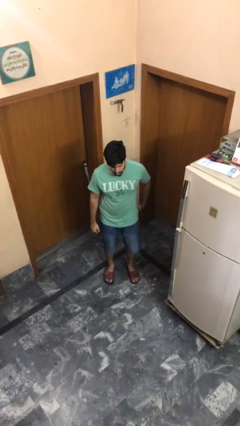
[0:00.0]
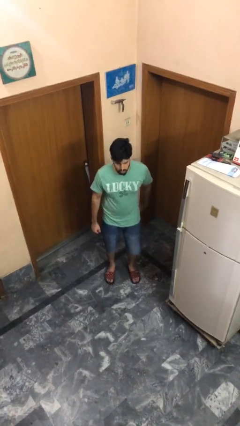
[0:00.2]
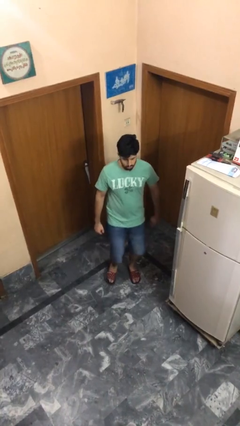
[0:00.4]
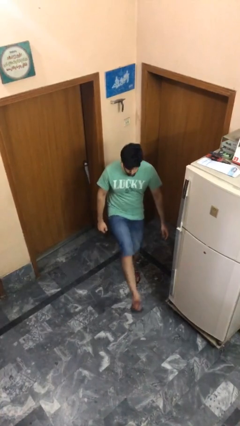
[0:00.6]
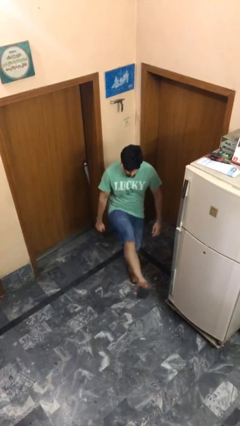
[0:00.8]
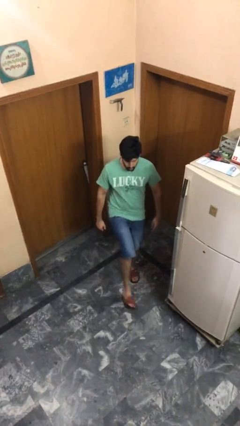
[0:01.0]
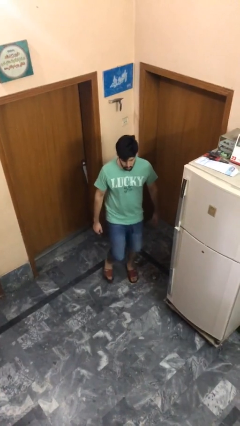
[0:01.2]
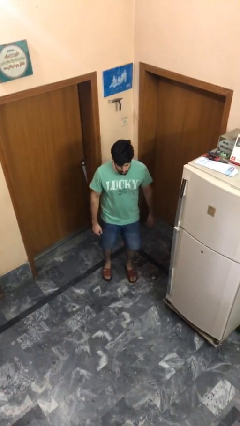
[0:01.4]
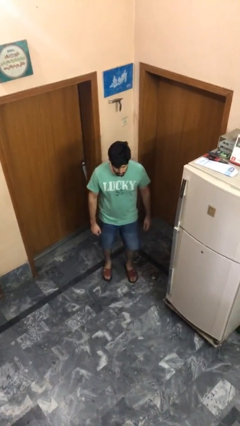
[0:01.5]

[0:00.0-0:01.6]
person karate kicks

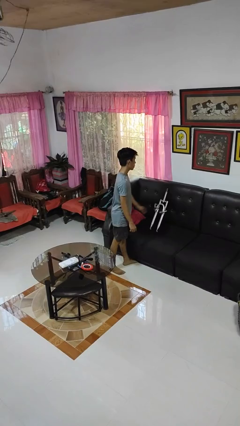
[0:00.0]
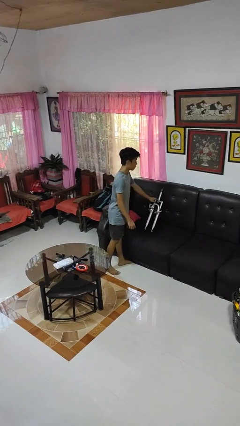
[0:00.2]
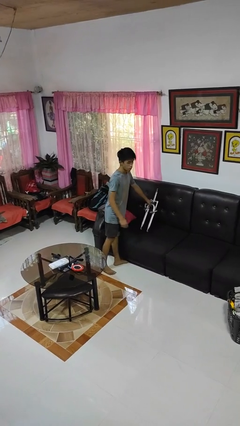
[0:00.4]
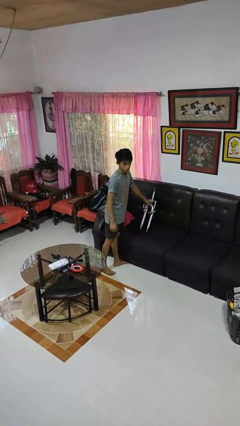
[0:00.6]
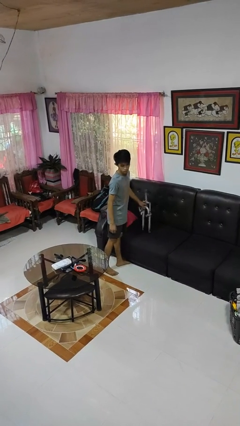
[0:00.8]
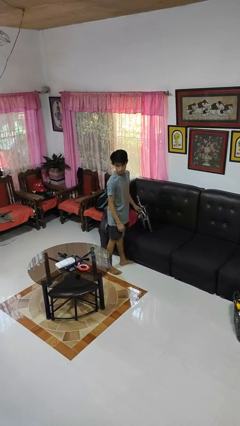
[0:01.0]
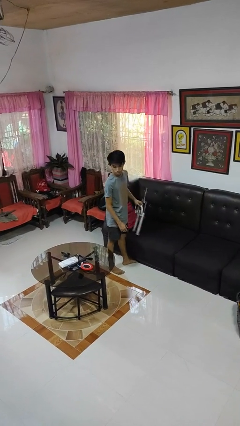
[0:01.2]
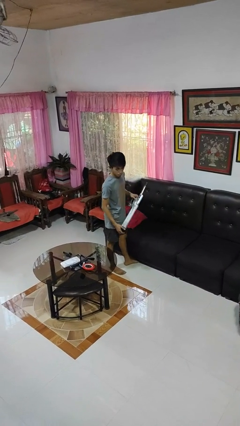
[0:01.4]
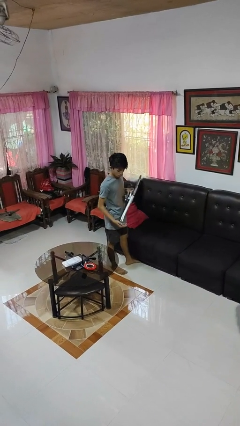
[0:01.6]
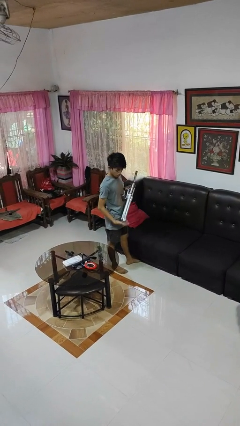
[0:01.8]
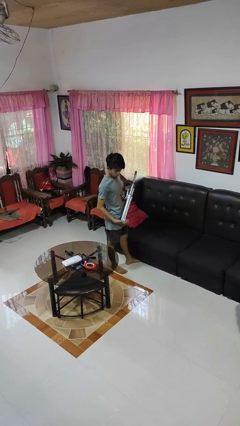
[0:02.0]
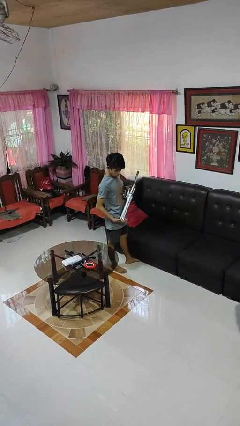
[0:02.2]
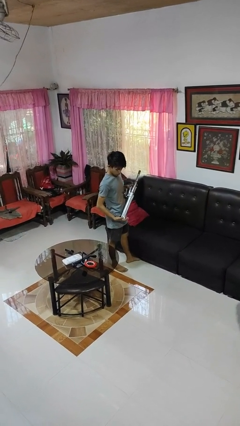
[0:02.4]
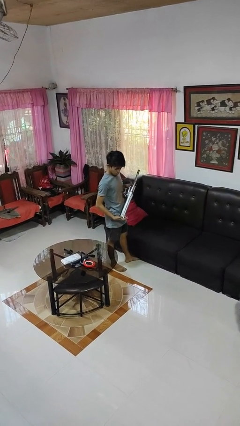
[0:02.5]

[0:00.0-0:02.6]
person picks up object from couch

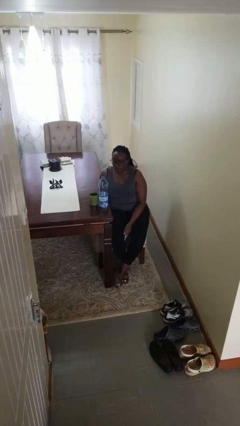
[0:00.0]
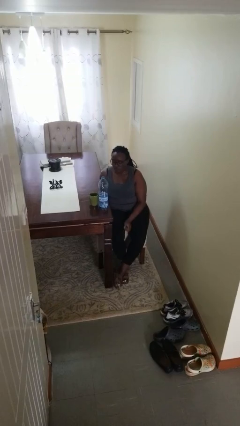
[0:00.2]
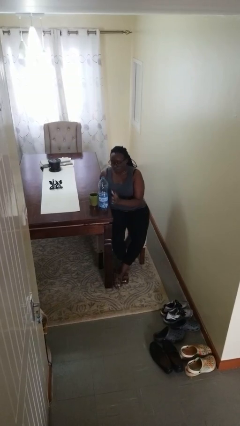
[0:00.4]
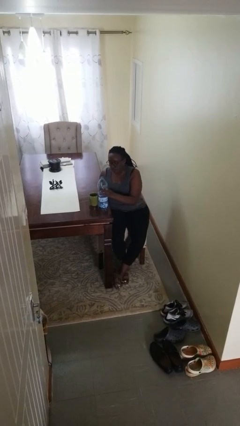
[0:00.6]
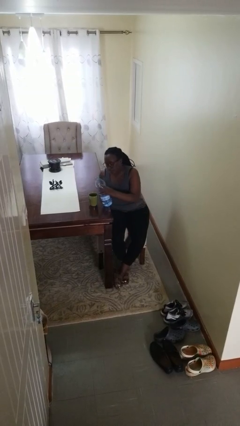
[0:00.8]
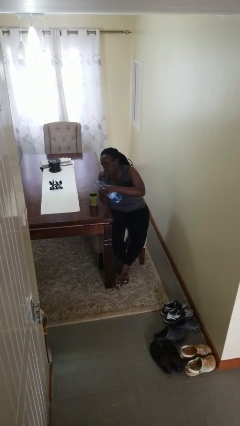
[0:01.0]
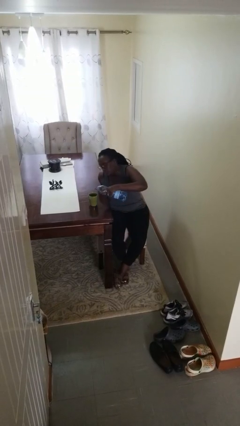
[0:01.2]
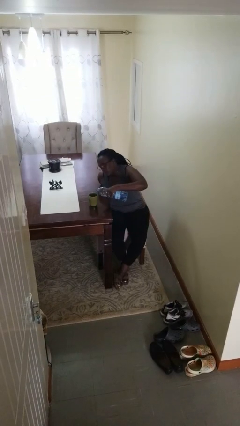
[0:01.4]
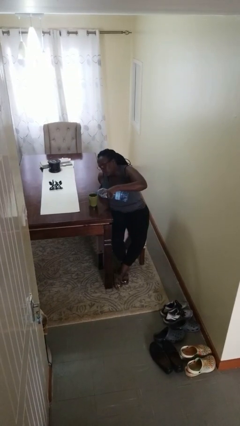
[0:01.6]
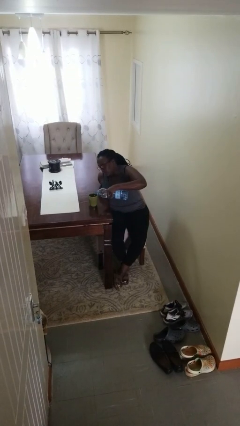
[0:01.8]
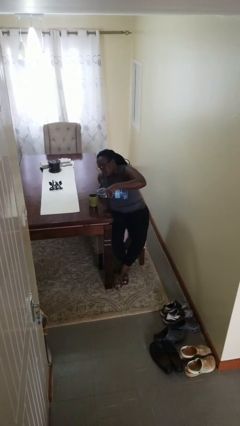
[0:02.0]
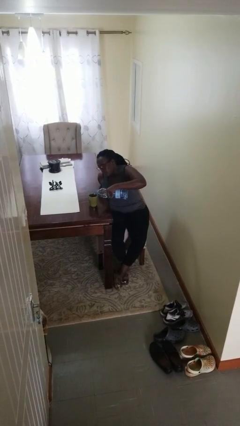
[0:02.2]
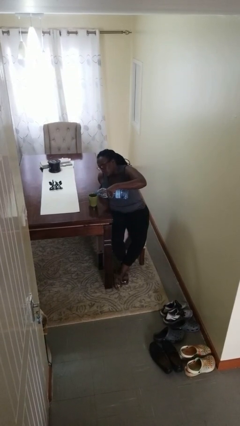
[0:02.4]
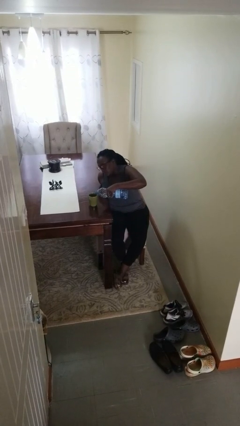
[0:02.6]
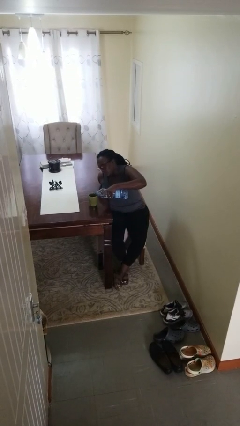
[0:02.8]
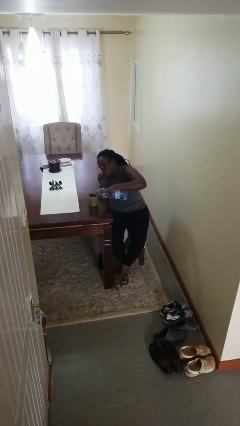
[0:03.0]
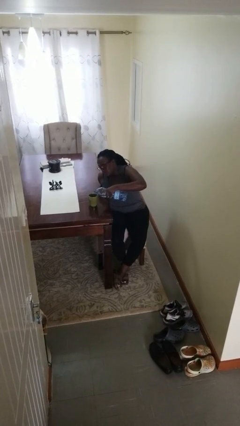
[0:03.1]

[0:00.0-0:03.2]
person pours liquid into cup

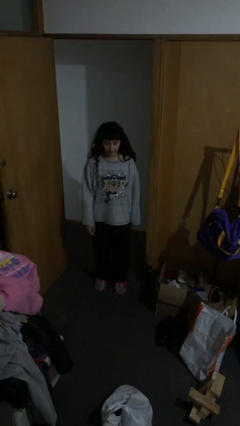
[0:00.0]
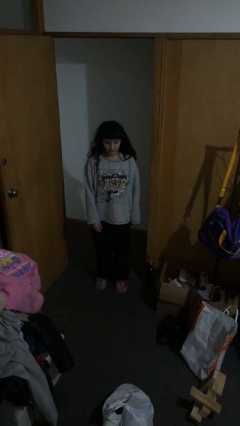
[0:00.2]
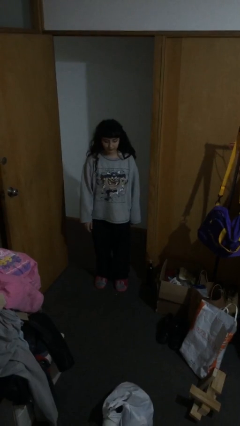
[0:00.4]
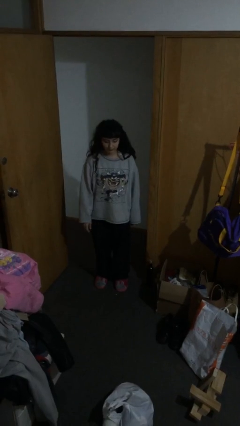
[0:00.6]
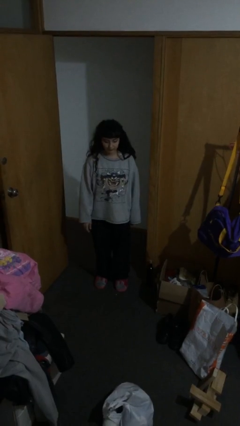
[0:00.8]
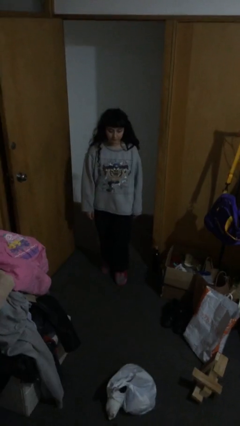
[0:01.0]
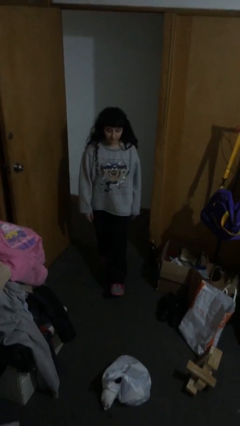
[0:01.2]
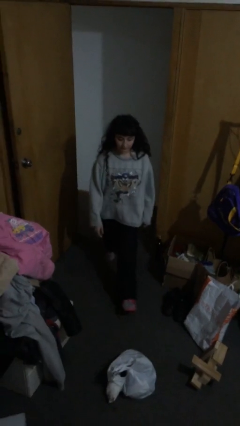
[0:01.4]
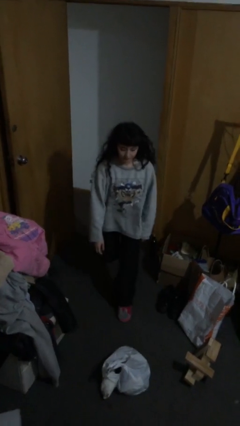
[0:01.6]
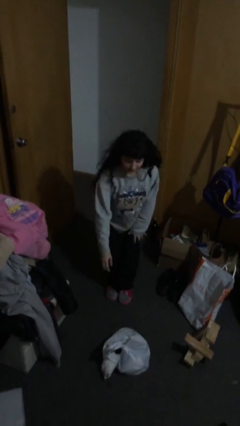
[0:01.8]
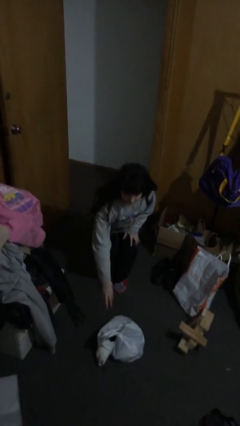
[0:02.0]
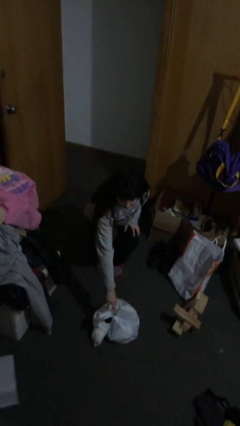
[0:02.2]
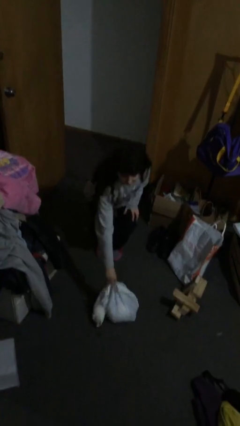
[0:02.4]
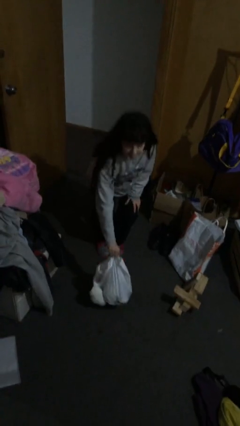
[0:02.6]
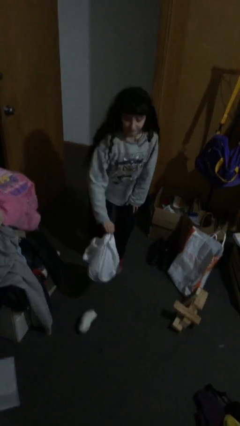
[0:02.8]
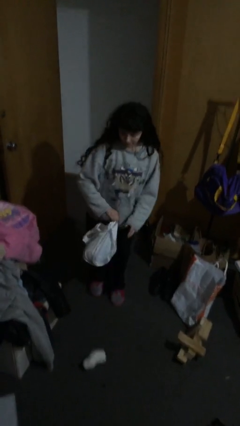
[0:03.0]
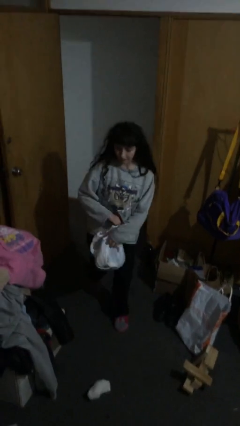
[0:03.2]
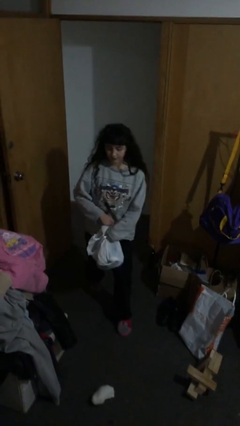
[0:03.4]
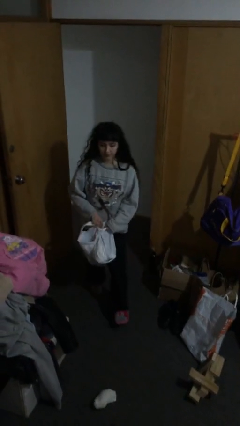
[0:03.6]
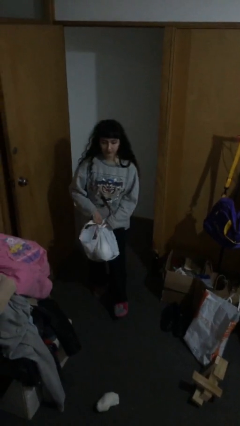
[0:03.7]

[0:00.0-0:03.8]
person picks up object from floor

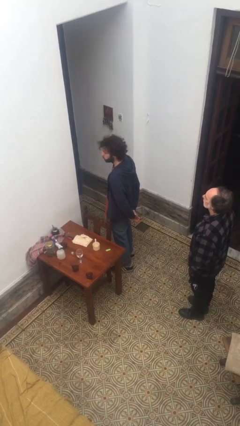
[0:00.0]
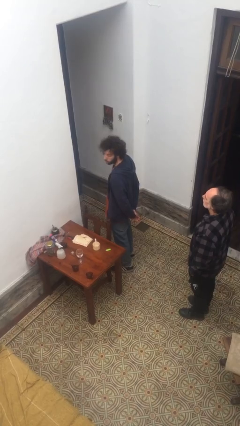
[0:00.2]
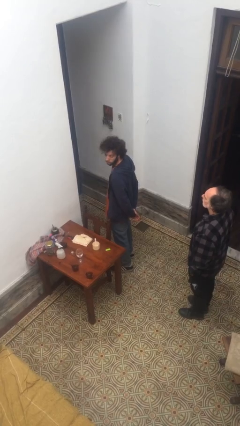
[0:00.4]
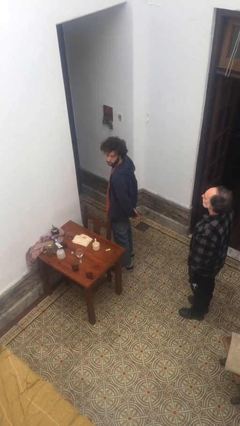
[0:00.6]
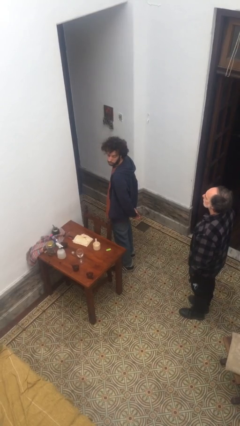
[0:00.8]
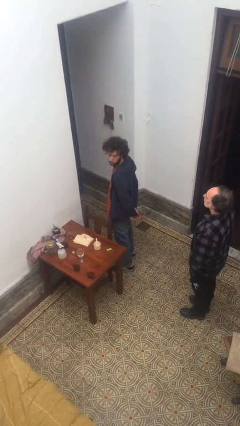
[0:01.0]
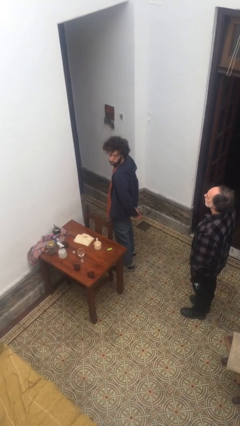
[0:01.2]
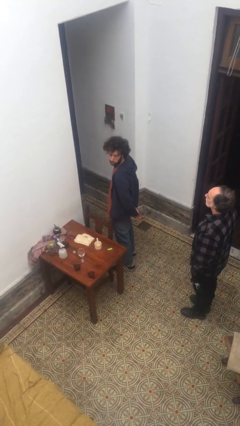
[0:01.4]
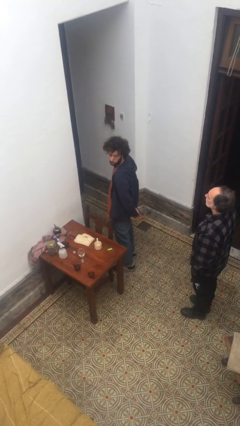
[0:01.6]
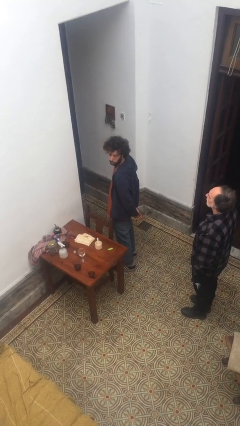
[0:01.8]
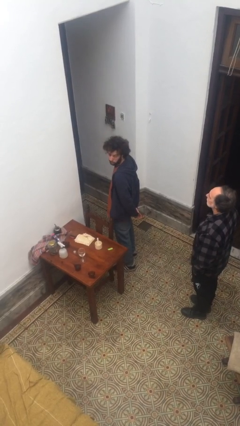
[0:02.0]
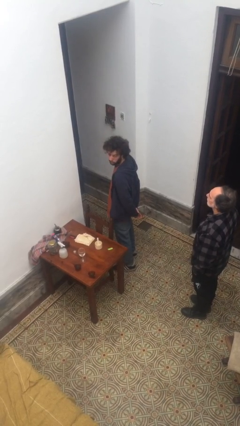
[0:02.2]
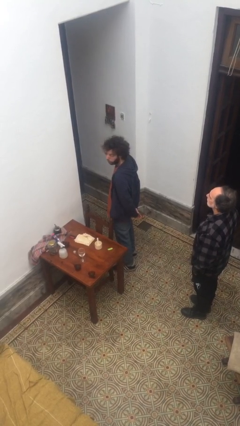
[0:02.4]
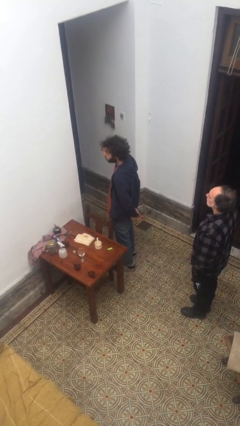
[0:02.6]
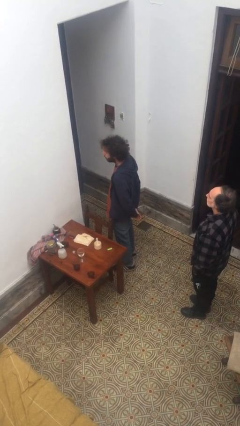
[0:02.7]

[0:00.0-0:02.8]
person looks over shoulder

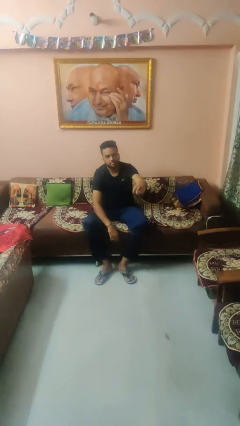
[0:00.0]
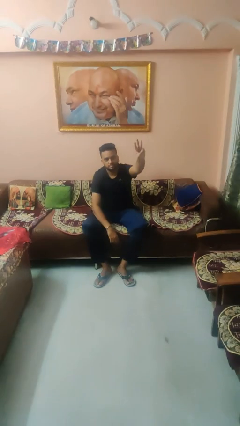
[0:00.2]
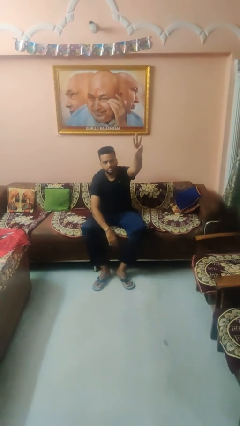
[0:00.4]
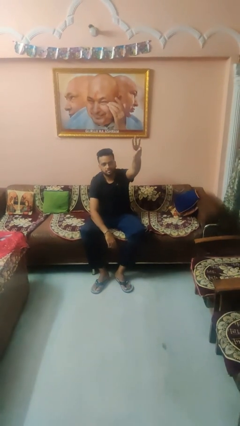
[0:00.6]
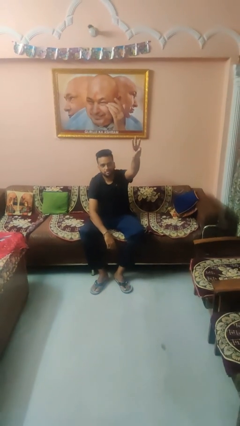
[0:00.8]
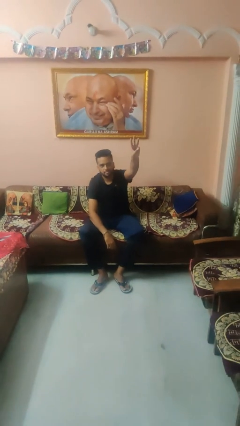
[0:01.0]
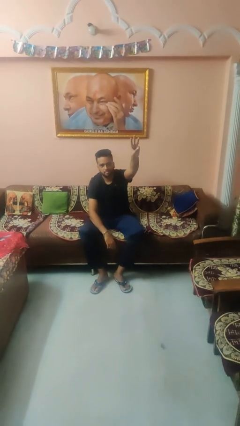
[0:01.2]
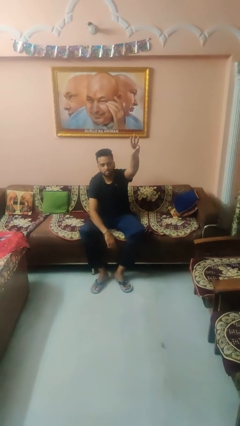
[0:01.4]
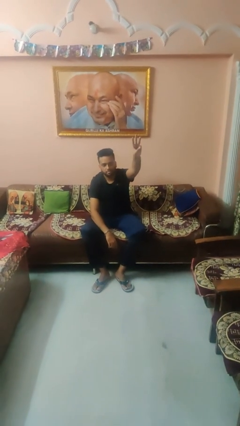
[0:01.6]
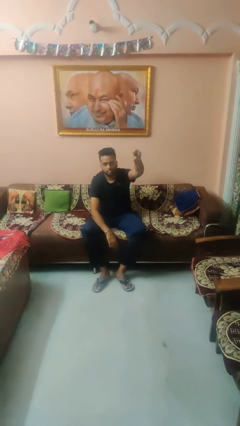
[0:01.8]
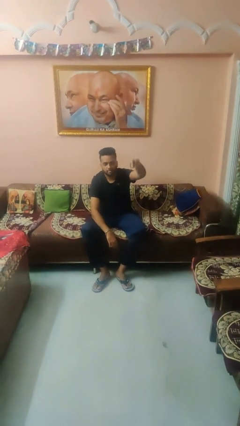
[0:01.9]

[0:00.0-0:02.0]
person gestures number three

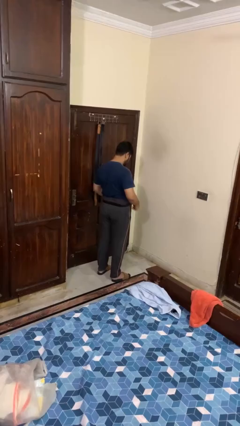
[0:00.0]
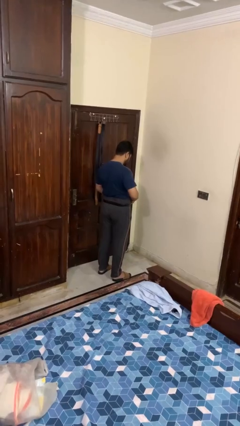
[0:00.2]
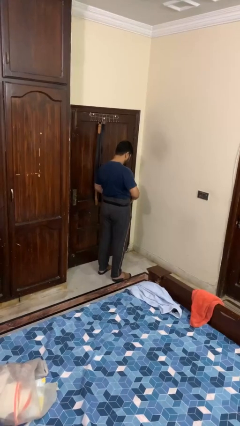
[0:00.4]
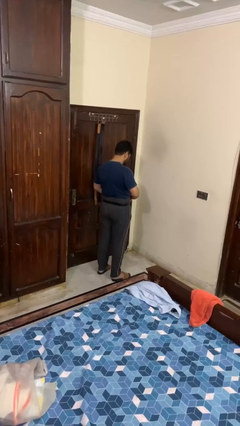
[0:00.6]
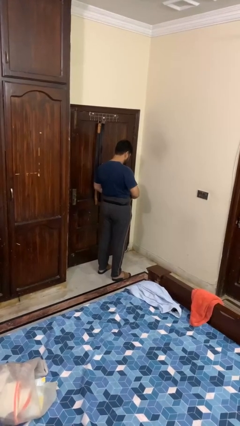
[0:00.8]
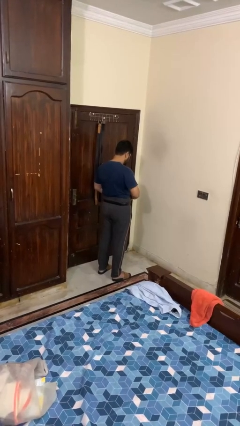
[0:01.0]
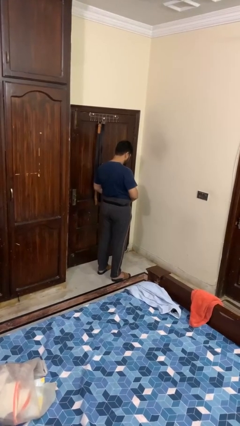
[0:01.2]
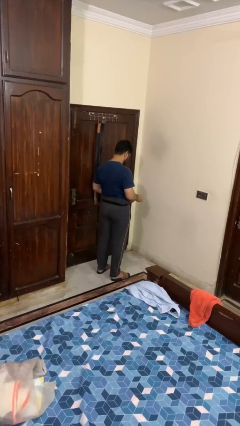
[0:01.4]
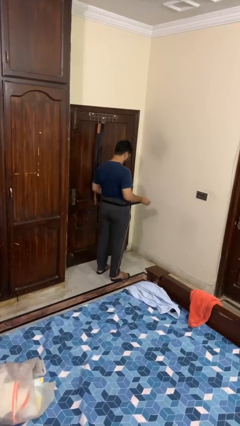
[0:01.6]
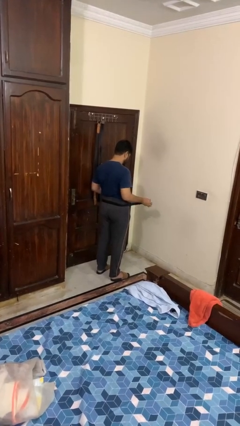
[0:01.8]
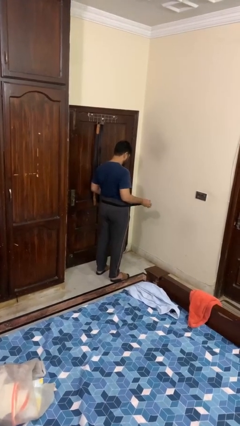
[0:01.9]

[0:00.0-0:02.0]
person takes off belt
